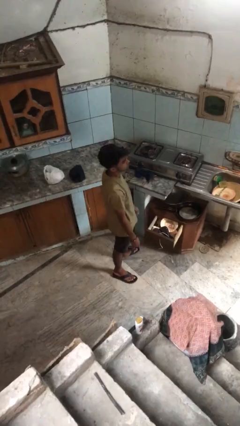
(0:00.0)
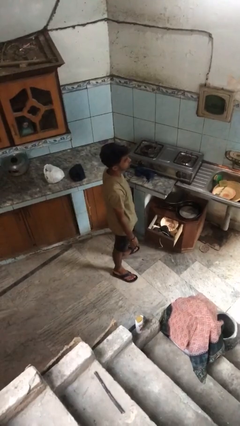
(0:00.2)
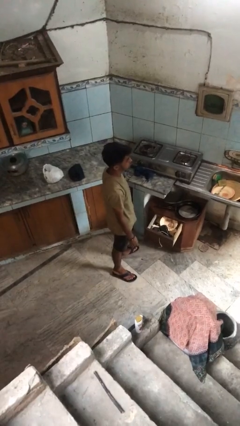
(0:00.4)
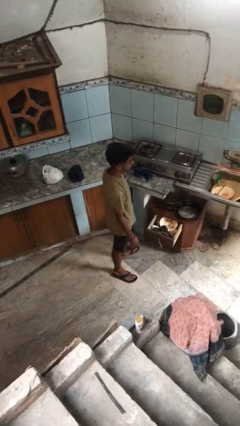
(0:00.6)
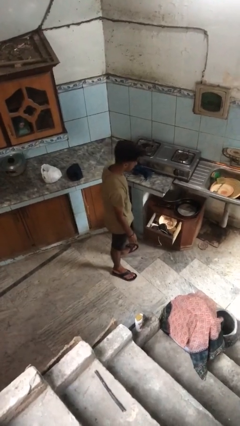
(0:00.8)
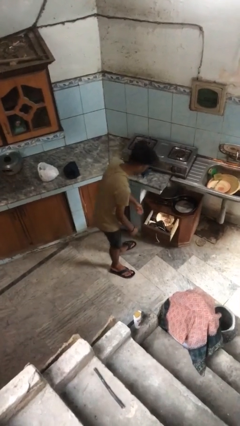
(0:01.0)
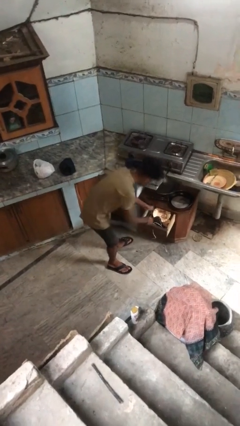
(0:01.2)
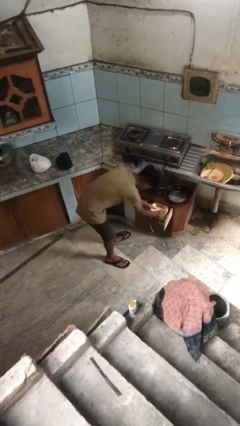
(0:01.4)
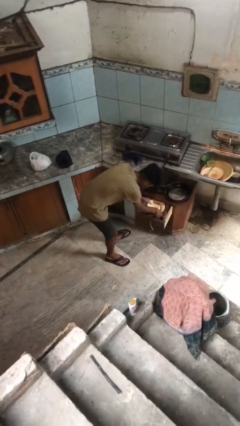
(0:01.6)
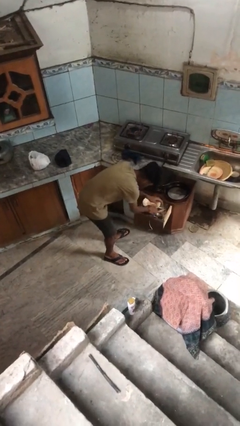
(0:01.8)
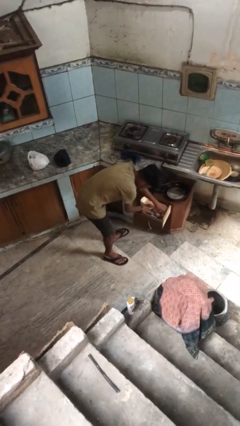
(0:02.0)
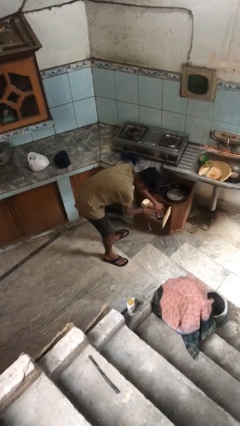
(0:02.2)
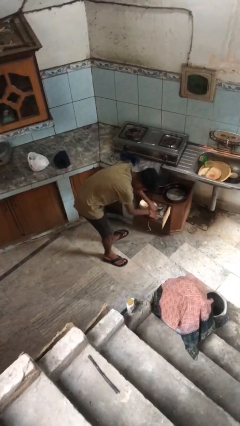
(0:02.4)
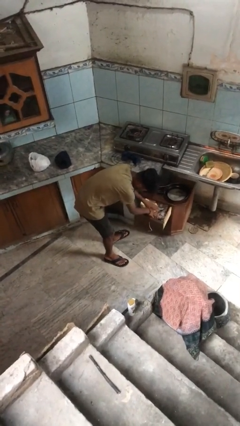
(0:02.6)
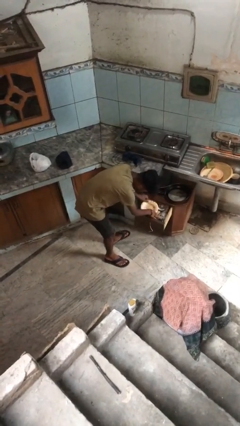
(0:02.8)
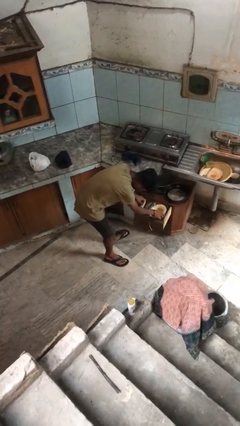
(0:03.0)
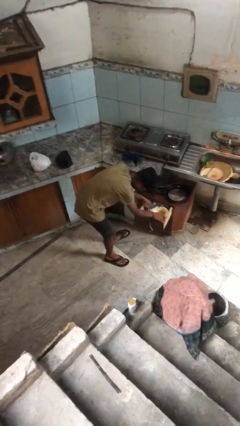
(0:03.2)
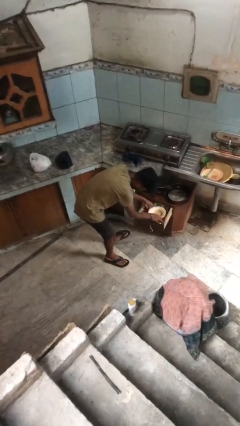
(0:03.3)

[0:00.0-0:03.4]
person searches in kitchen drawer

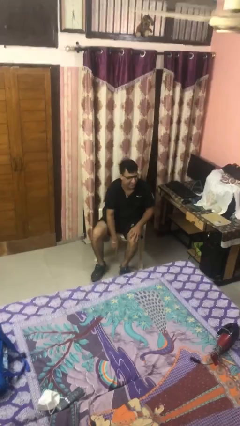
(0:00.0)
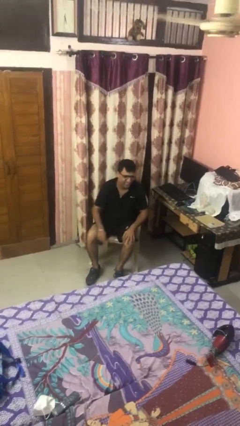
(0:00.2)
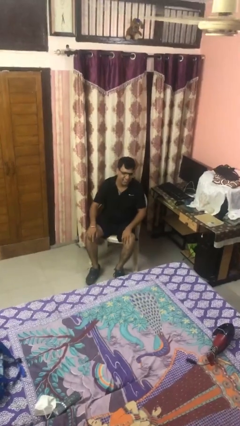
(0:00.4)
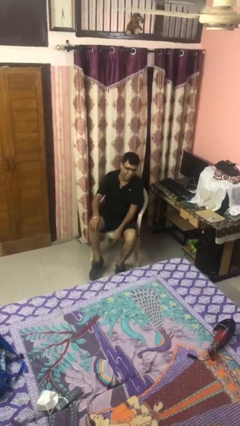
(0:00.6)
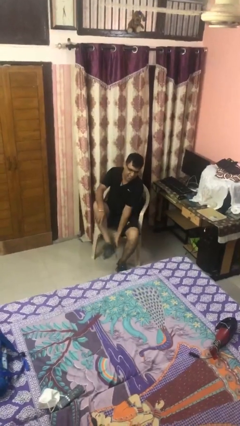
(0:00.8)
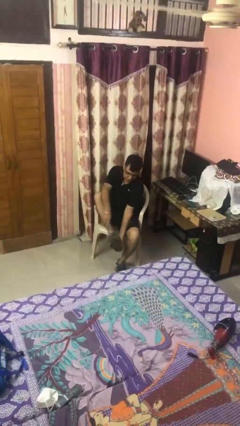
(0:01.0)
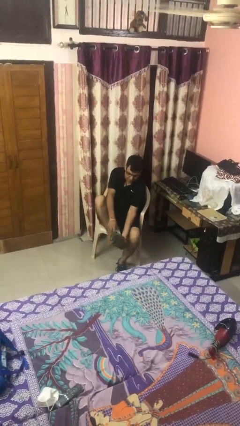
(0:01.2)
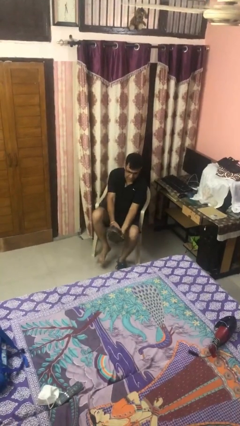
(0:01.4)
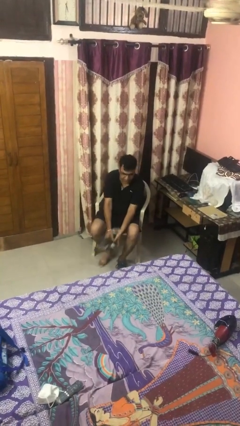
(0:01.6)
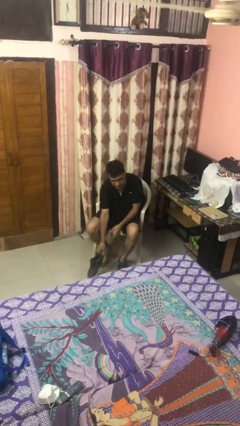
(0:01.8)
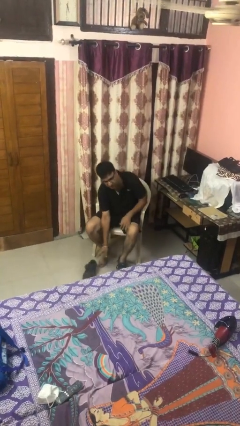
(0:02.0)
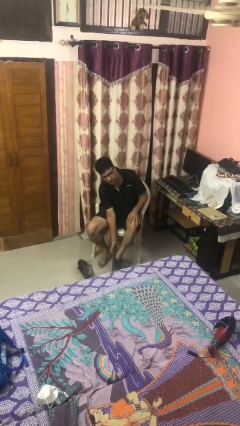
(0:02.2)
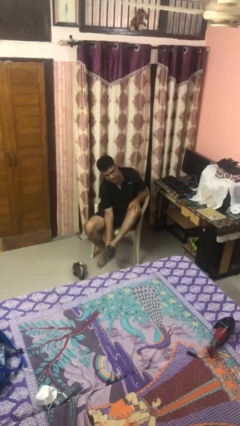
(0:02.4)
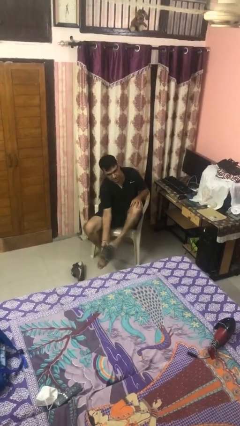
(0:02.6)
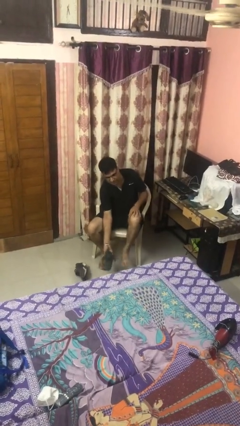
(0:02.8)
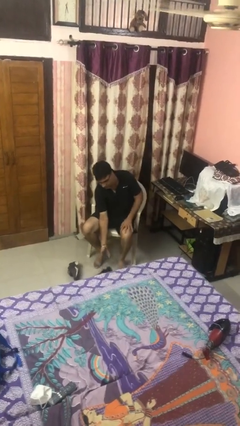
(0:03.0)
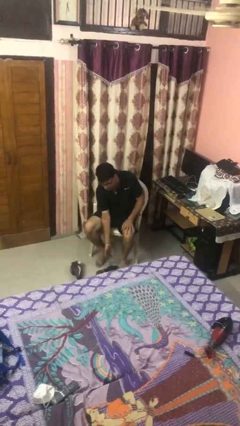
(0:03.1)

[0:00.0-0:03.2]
person takes off shoes

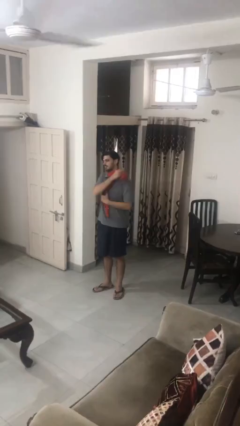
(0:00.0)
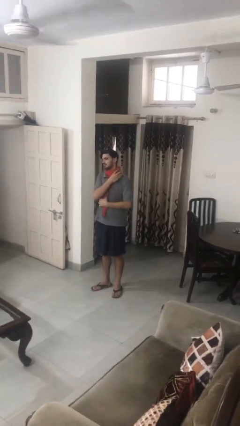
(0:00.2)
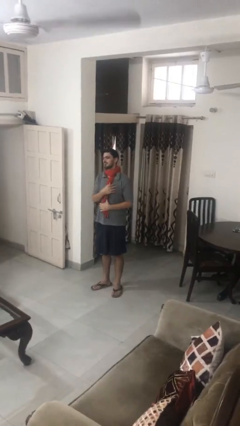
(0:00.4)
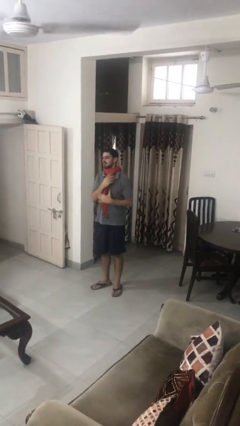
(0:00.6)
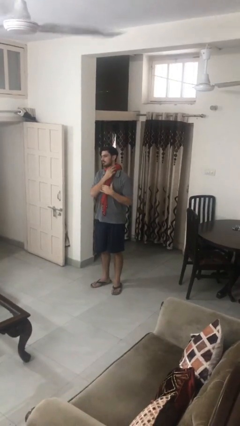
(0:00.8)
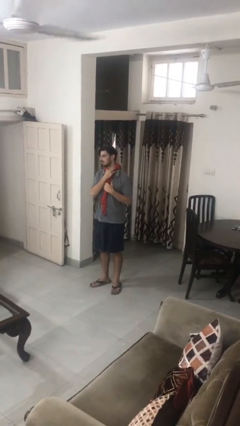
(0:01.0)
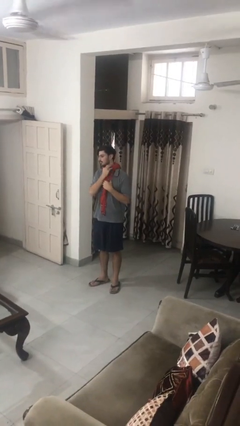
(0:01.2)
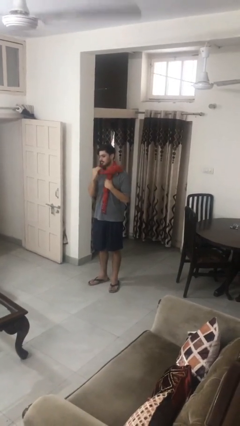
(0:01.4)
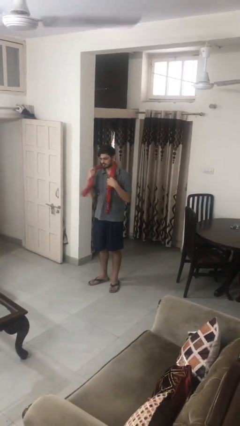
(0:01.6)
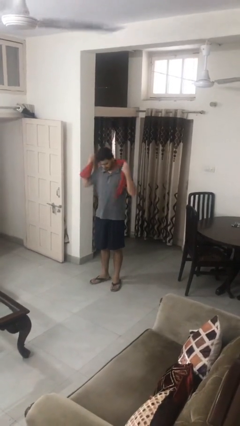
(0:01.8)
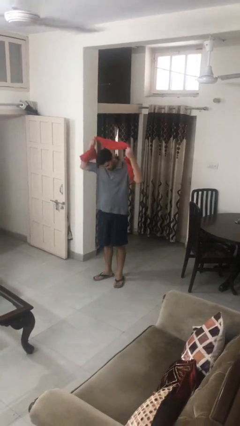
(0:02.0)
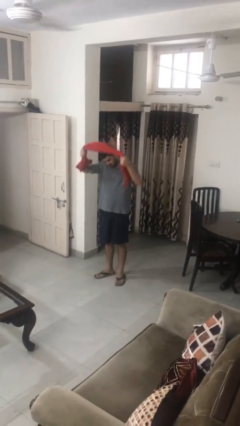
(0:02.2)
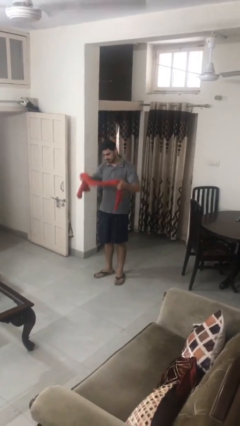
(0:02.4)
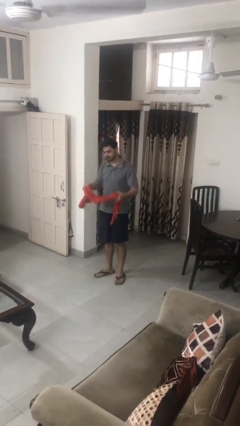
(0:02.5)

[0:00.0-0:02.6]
person takes off scarf

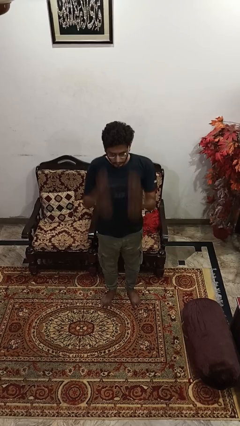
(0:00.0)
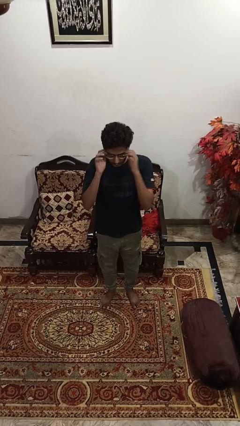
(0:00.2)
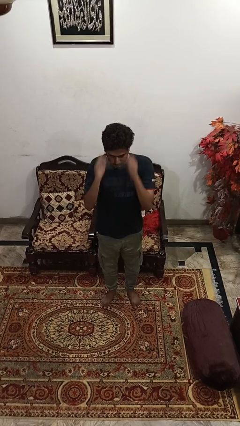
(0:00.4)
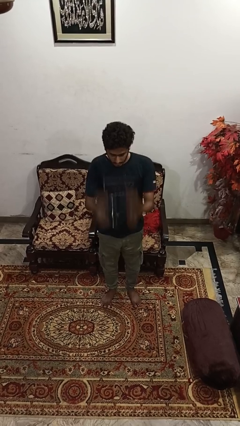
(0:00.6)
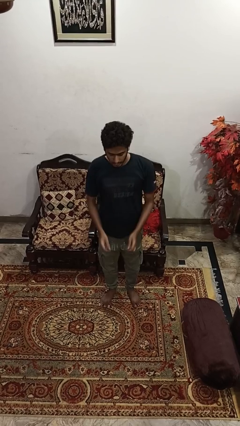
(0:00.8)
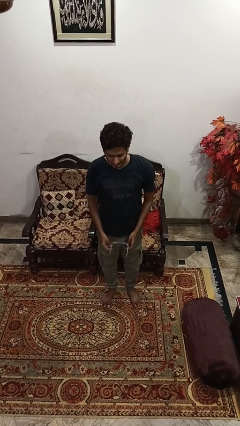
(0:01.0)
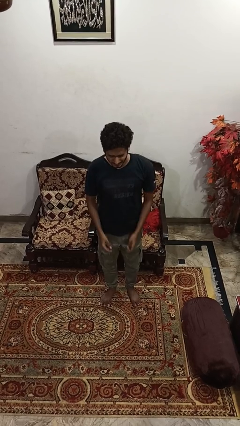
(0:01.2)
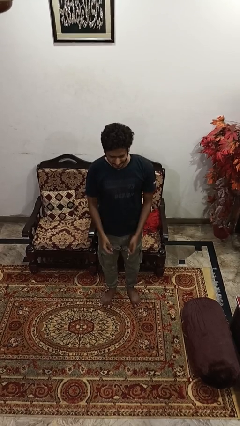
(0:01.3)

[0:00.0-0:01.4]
person takes off glasses

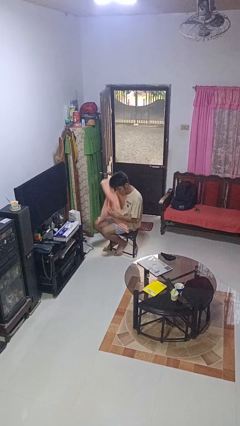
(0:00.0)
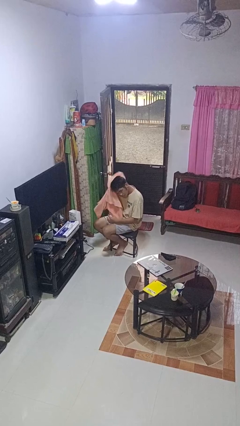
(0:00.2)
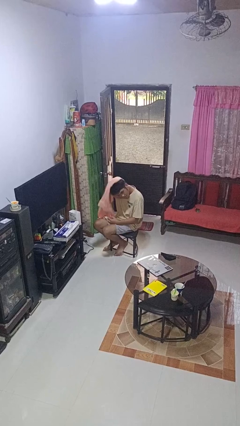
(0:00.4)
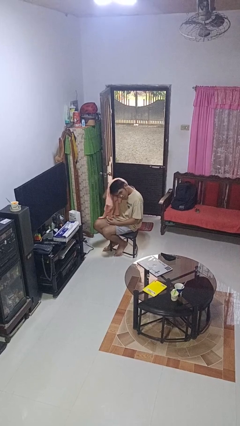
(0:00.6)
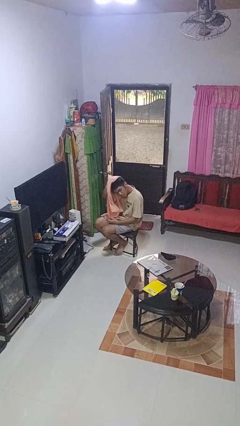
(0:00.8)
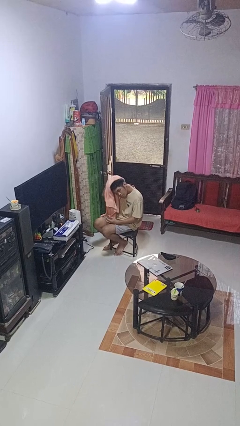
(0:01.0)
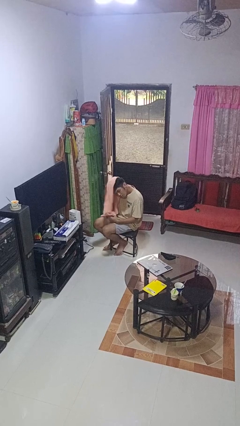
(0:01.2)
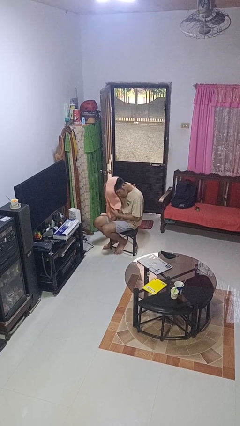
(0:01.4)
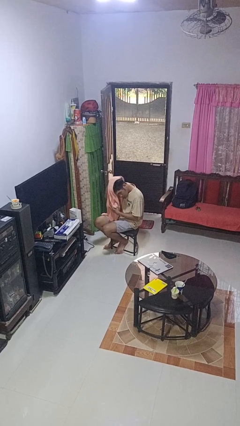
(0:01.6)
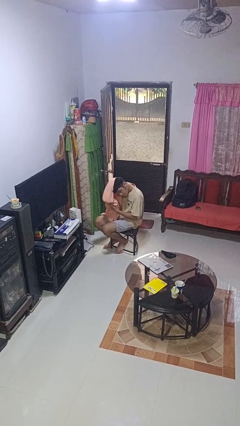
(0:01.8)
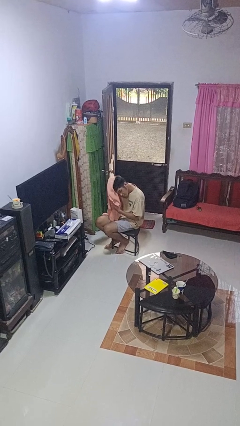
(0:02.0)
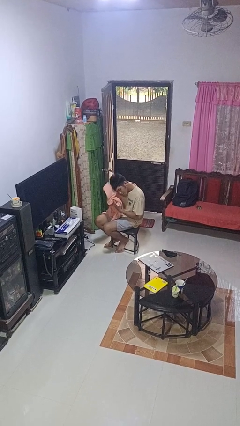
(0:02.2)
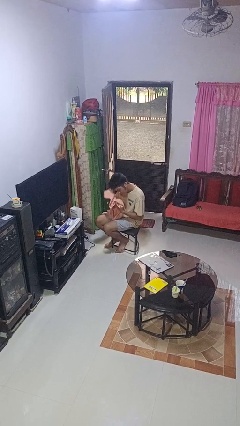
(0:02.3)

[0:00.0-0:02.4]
person dries hair with towel

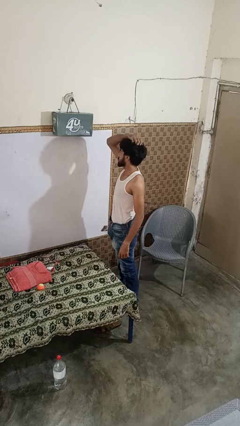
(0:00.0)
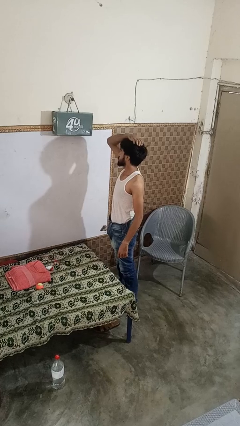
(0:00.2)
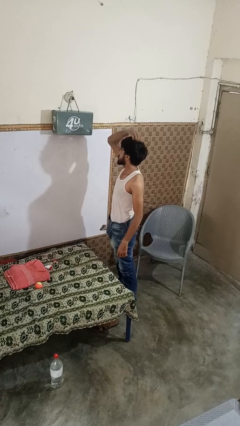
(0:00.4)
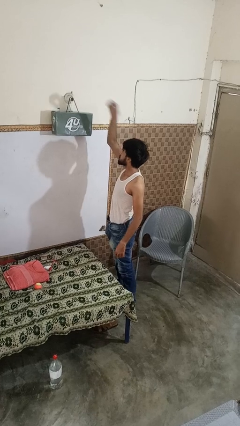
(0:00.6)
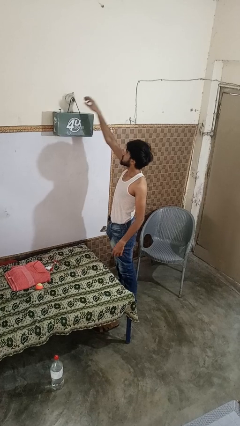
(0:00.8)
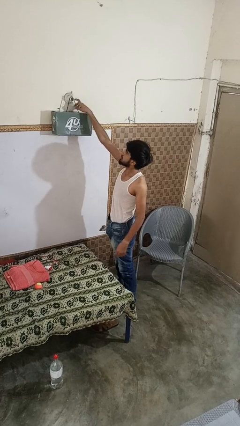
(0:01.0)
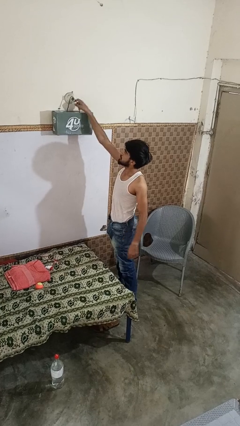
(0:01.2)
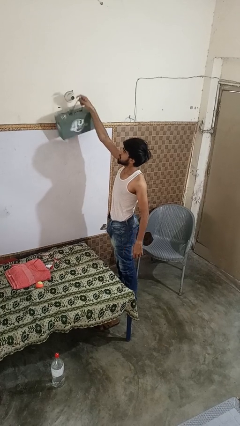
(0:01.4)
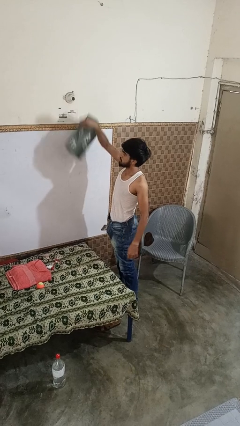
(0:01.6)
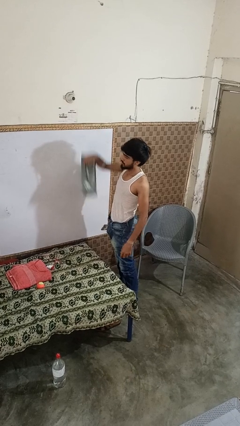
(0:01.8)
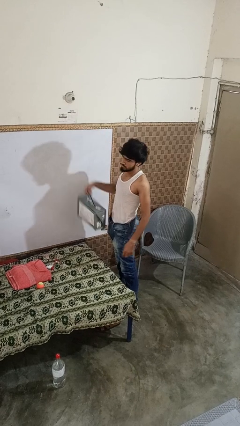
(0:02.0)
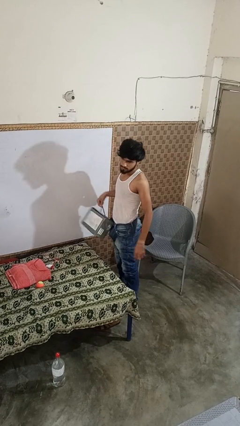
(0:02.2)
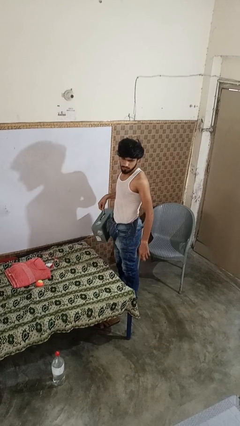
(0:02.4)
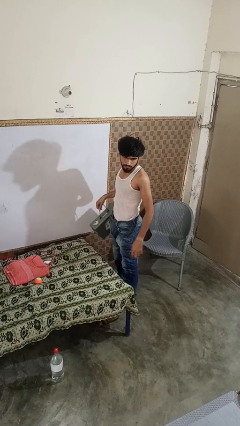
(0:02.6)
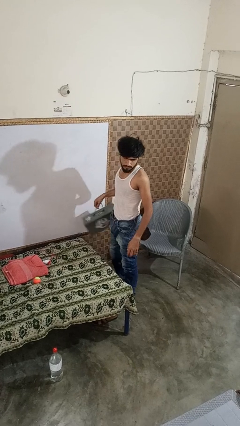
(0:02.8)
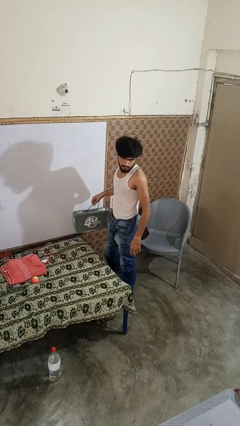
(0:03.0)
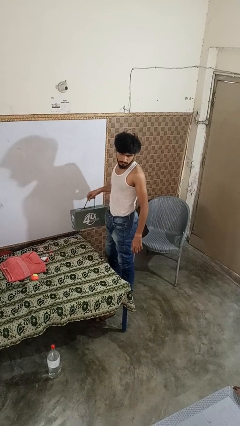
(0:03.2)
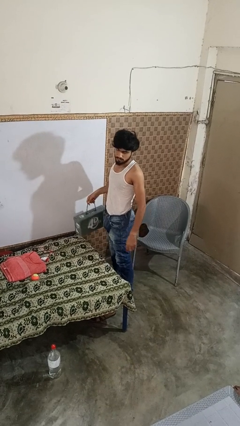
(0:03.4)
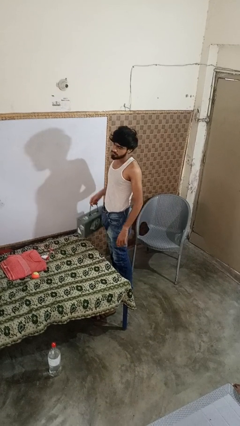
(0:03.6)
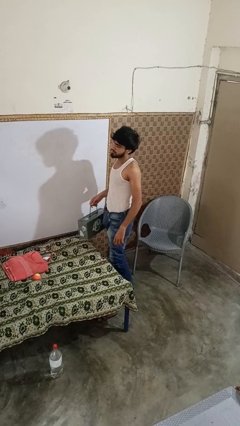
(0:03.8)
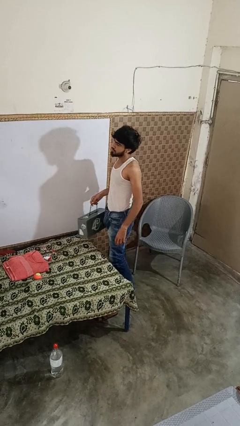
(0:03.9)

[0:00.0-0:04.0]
person takes down smoke detector

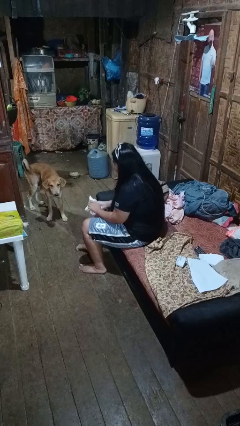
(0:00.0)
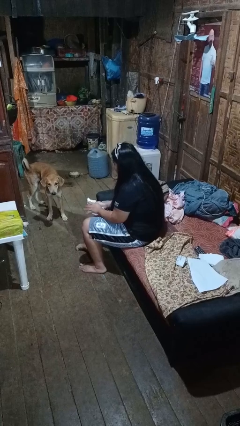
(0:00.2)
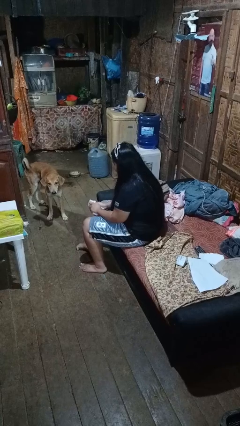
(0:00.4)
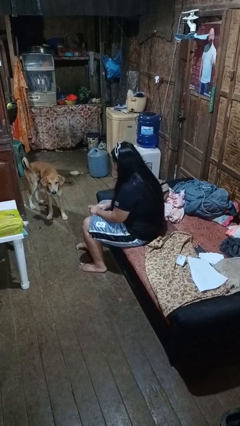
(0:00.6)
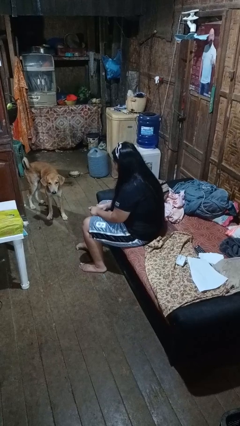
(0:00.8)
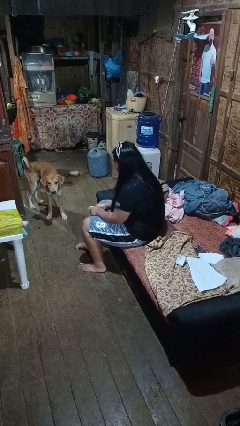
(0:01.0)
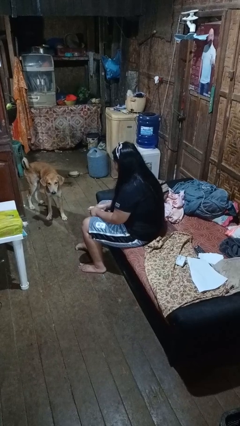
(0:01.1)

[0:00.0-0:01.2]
person crumples paper
